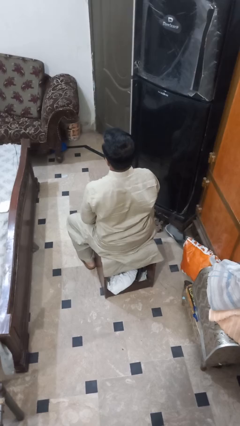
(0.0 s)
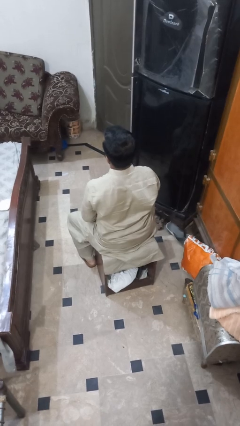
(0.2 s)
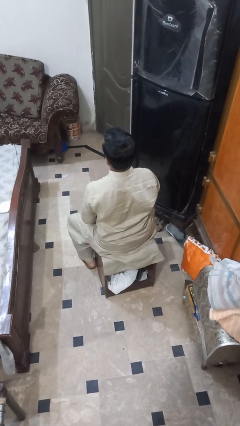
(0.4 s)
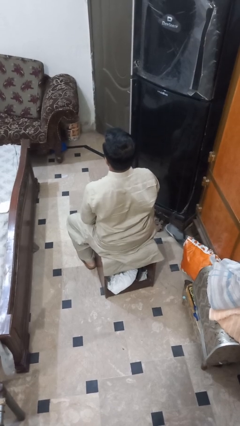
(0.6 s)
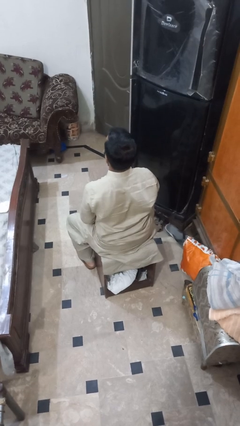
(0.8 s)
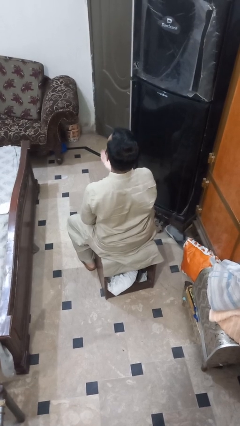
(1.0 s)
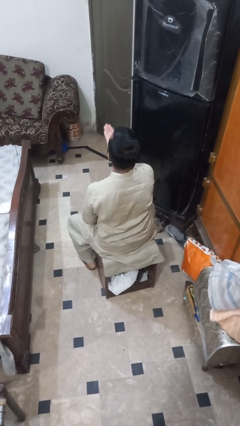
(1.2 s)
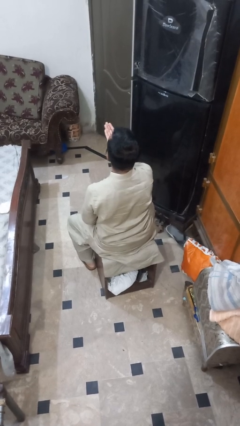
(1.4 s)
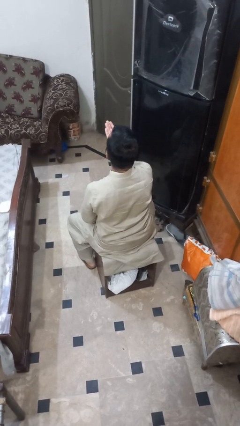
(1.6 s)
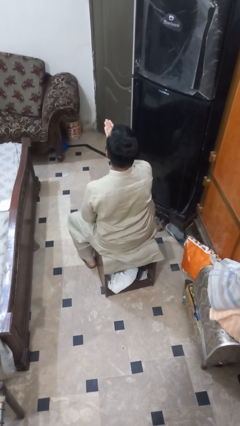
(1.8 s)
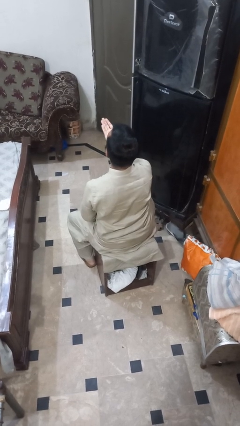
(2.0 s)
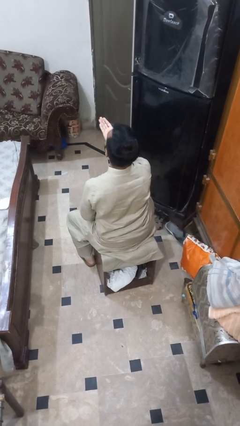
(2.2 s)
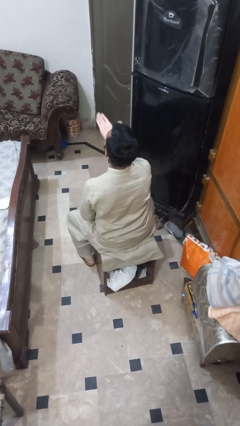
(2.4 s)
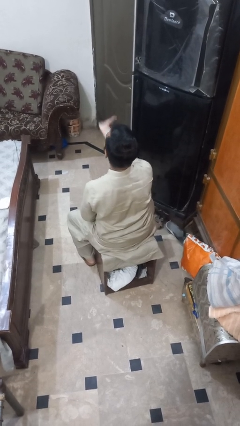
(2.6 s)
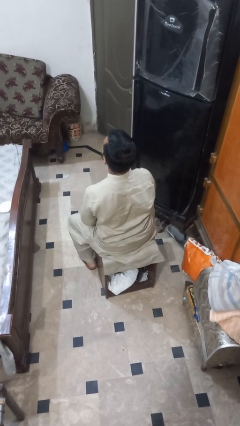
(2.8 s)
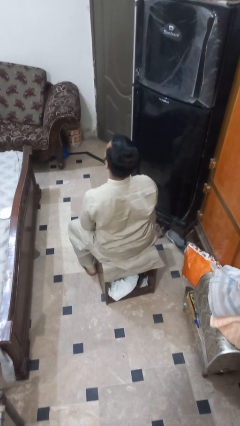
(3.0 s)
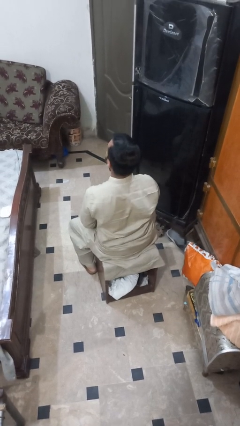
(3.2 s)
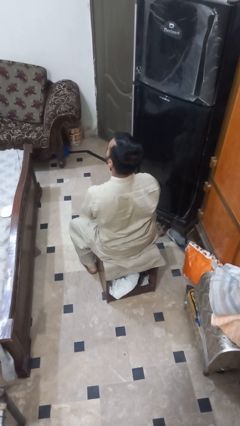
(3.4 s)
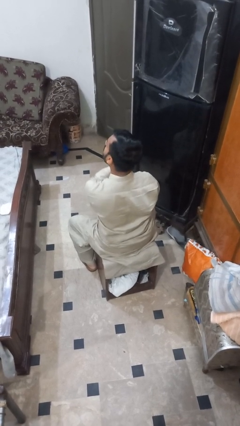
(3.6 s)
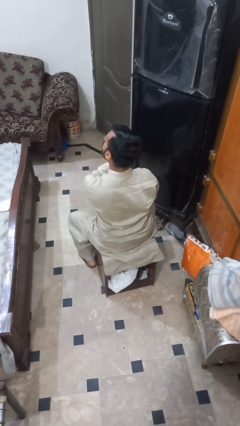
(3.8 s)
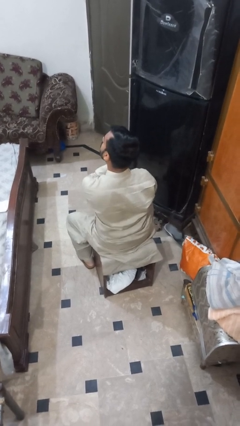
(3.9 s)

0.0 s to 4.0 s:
person gestures blow kiss

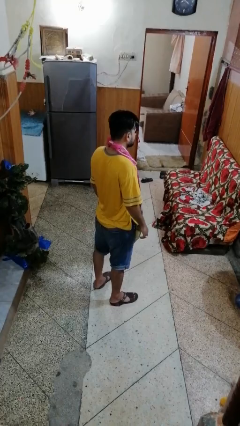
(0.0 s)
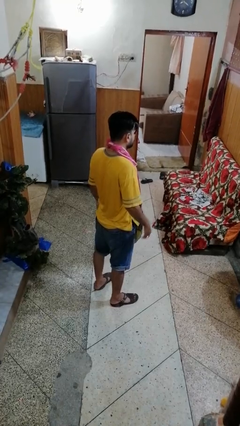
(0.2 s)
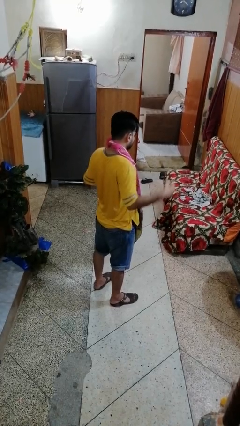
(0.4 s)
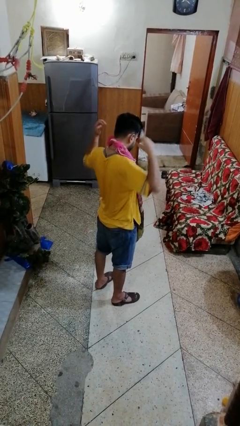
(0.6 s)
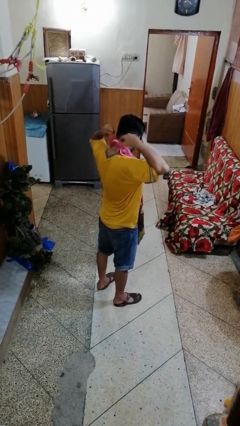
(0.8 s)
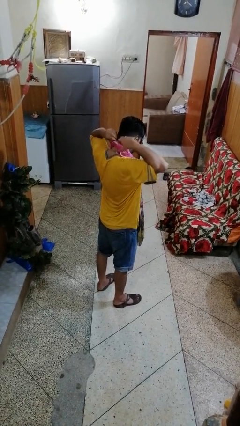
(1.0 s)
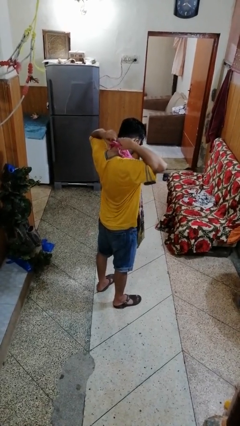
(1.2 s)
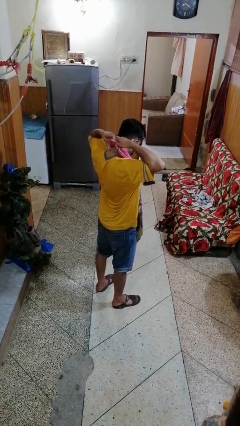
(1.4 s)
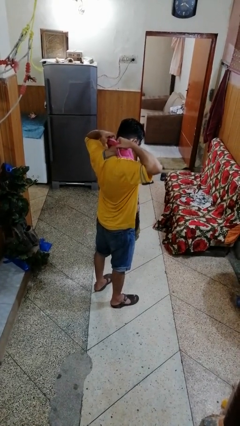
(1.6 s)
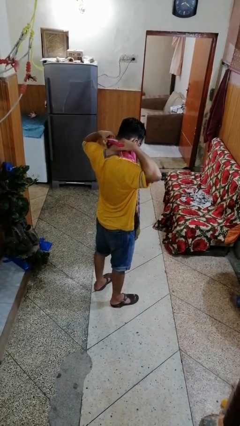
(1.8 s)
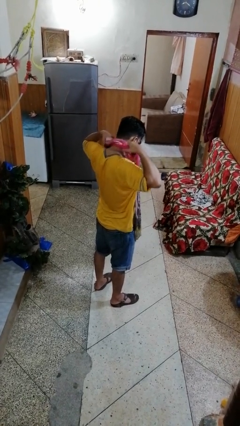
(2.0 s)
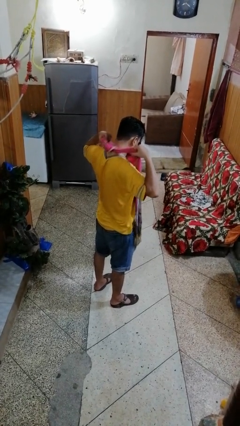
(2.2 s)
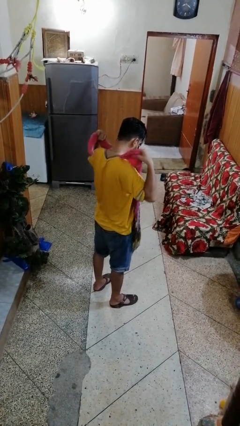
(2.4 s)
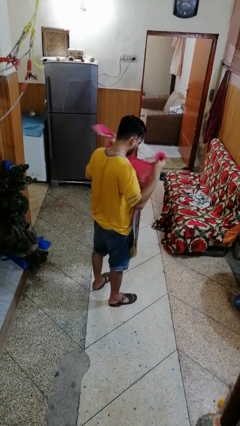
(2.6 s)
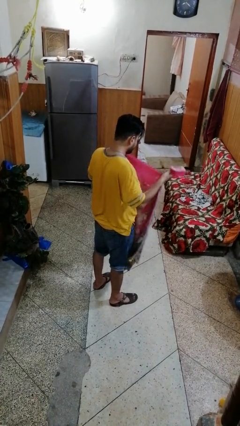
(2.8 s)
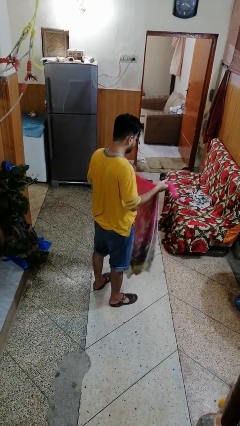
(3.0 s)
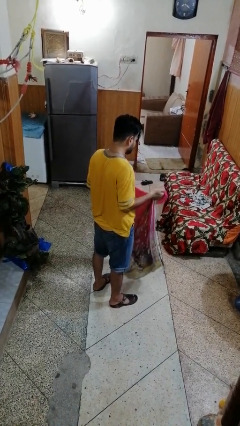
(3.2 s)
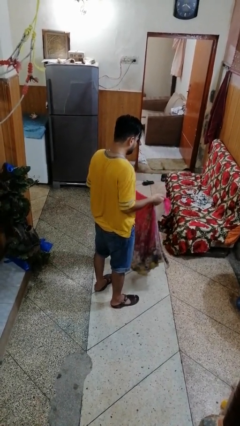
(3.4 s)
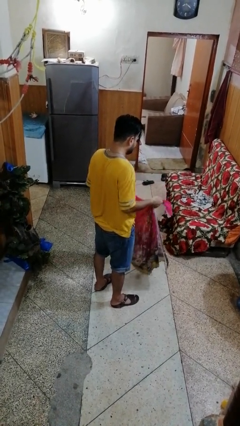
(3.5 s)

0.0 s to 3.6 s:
person takes off apron

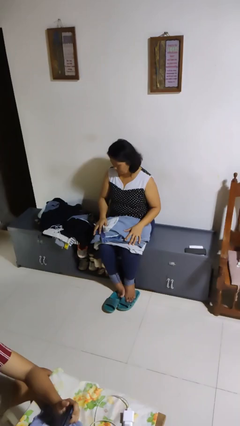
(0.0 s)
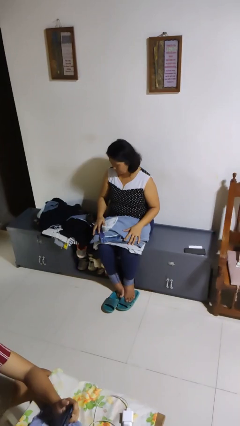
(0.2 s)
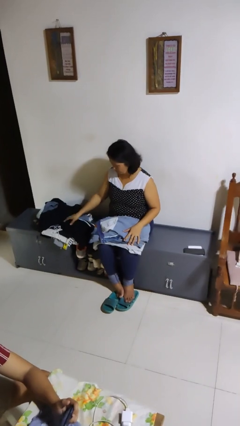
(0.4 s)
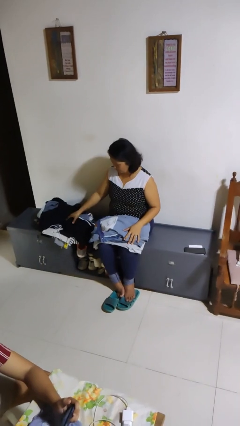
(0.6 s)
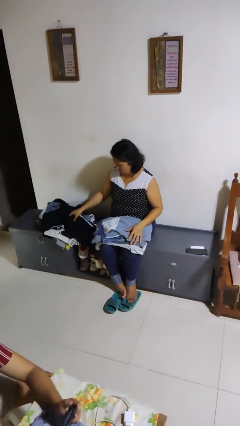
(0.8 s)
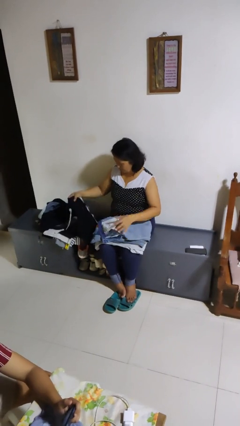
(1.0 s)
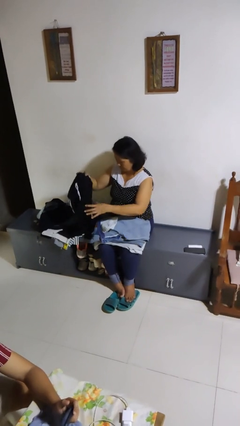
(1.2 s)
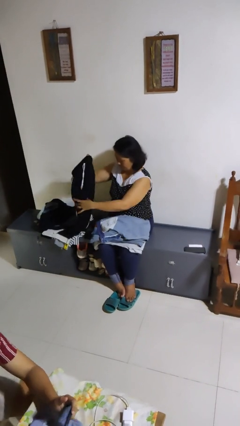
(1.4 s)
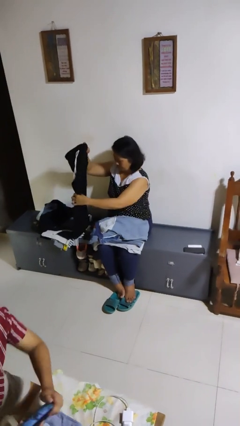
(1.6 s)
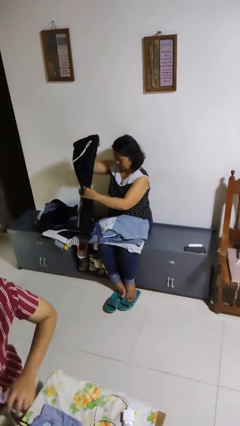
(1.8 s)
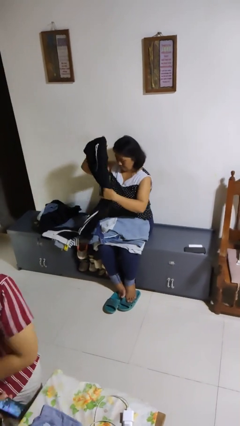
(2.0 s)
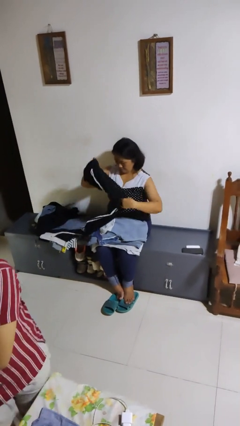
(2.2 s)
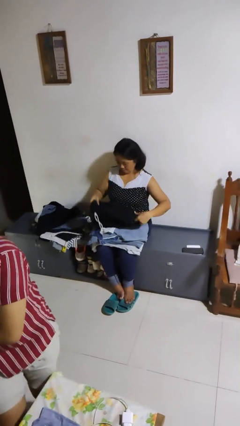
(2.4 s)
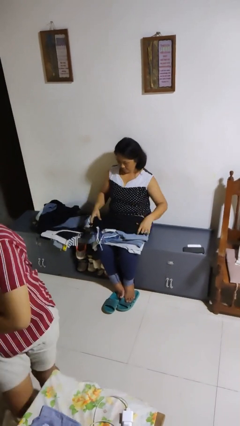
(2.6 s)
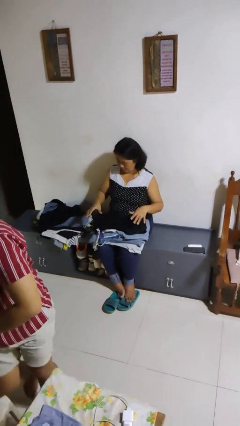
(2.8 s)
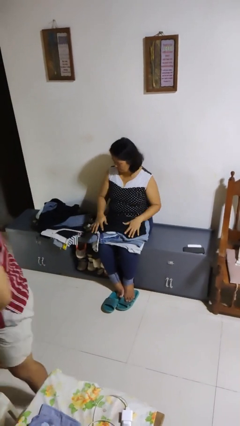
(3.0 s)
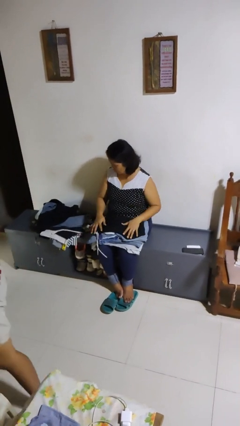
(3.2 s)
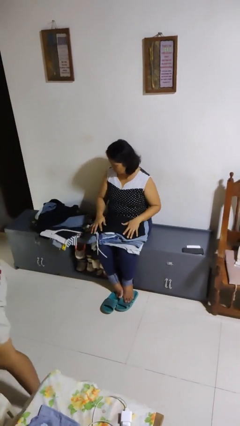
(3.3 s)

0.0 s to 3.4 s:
person folds pants

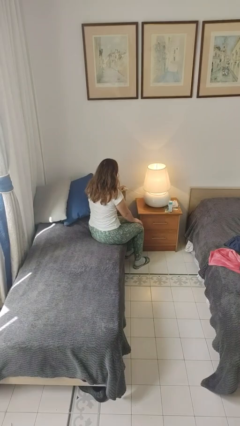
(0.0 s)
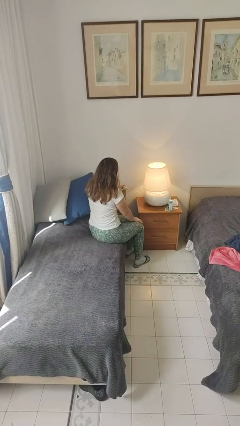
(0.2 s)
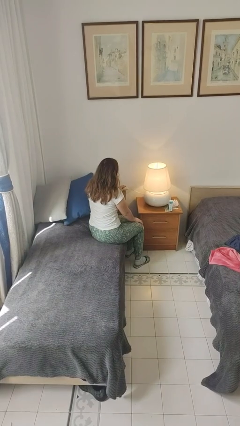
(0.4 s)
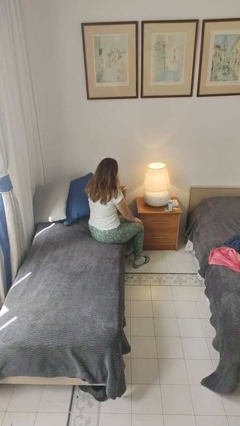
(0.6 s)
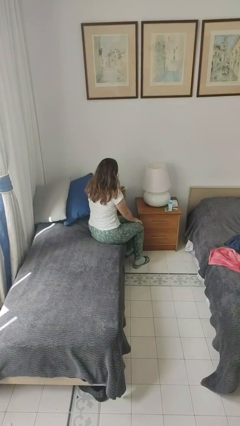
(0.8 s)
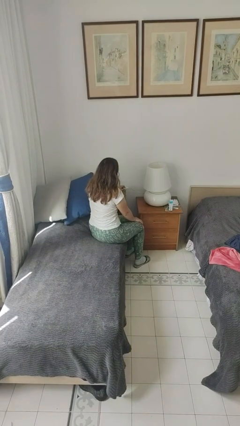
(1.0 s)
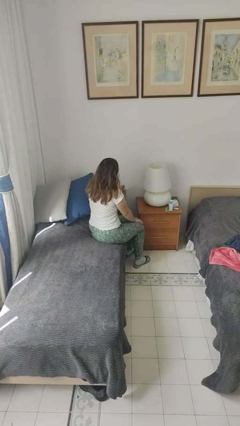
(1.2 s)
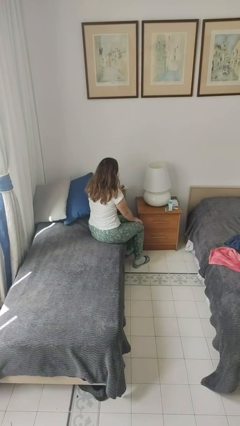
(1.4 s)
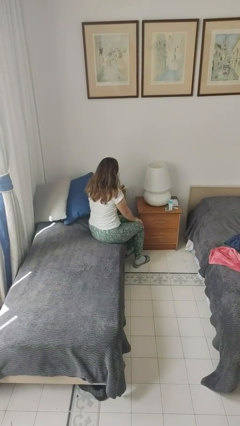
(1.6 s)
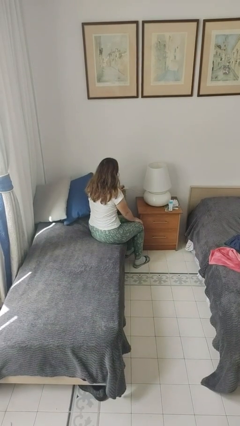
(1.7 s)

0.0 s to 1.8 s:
person turns off lamp

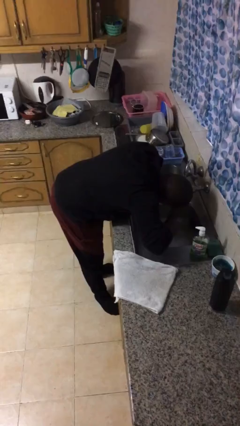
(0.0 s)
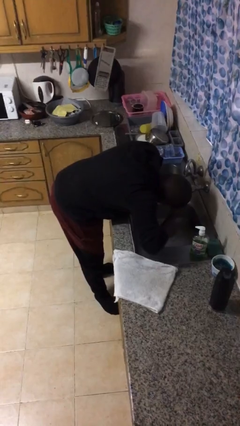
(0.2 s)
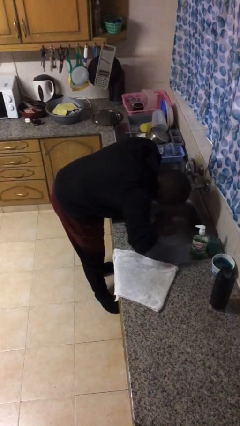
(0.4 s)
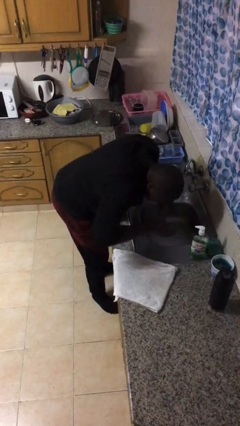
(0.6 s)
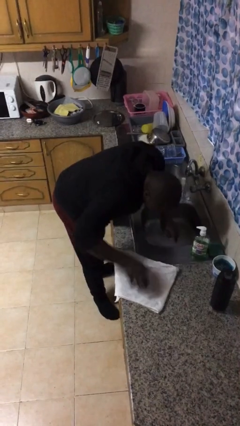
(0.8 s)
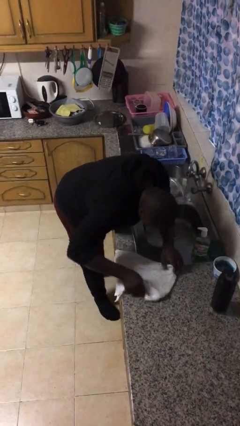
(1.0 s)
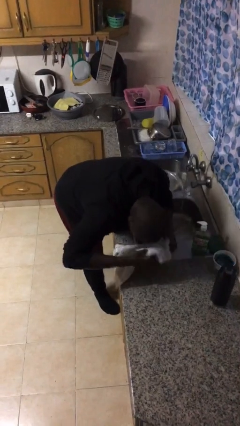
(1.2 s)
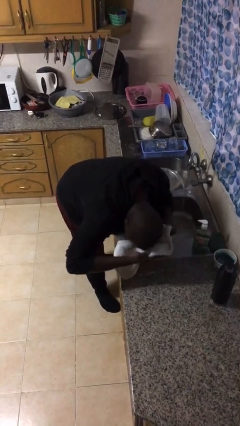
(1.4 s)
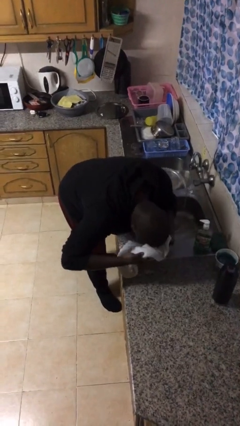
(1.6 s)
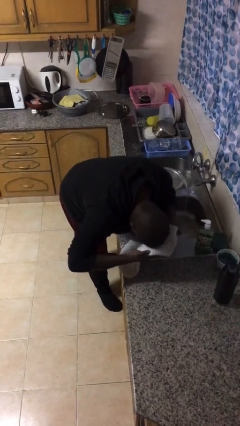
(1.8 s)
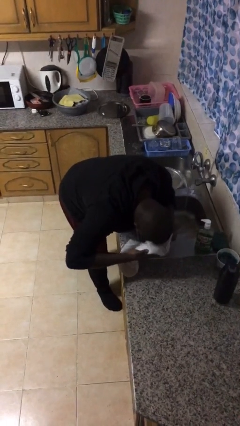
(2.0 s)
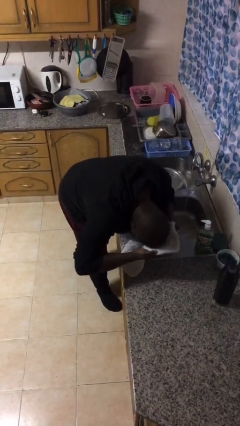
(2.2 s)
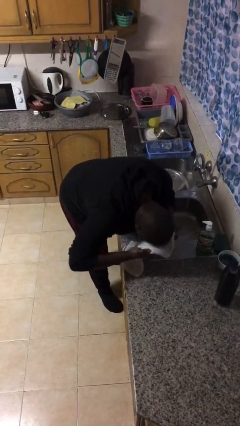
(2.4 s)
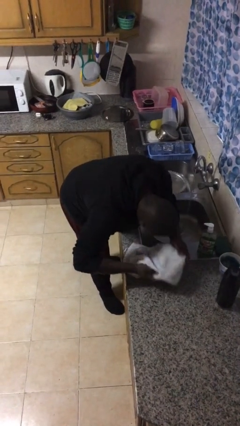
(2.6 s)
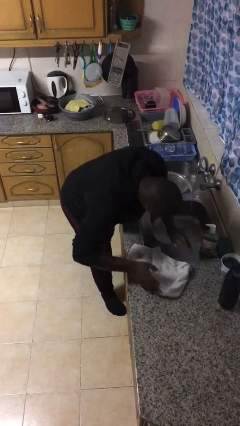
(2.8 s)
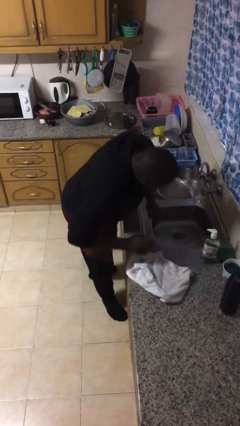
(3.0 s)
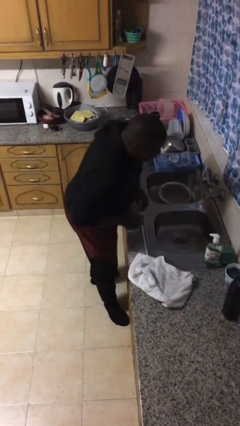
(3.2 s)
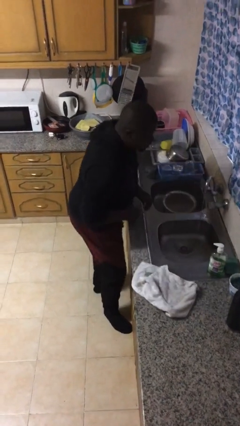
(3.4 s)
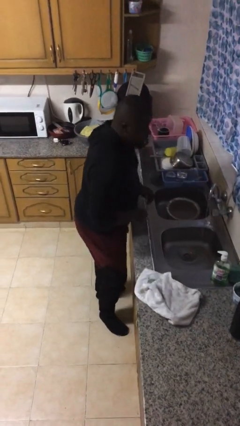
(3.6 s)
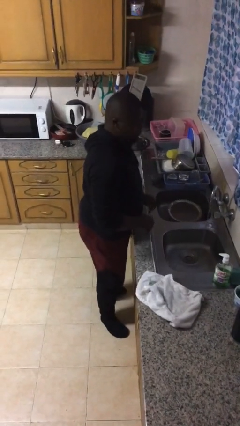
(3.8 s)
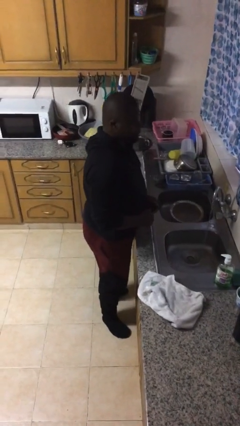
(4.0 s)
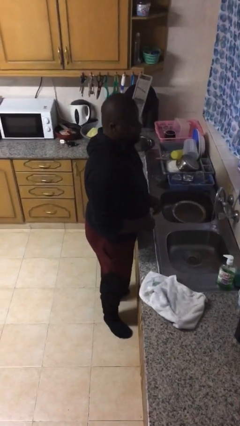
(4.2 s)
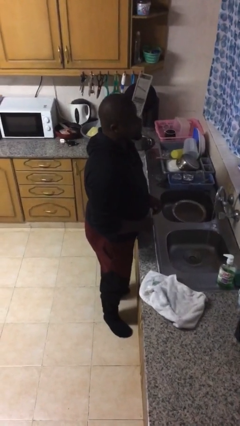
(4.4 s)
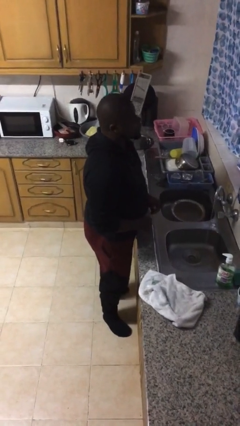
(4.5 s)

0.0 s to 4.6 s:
person dries face with towel

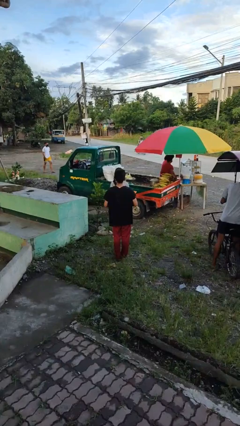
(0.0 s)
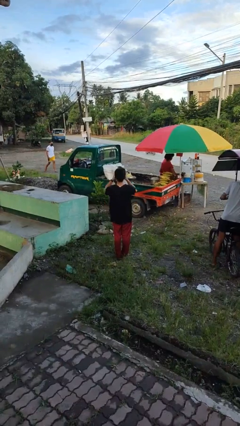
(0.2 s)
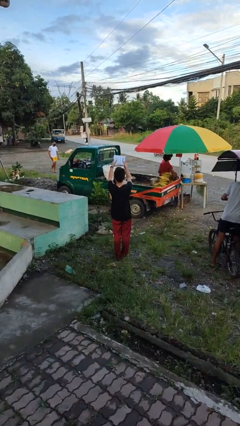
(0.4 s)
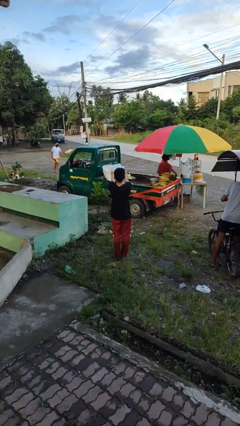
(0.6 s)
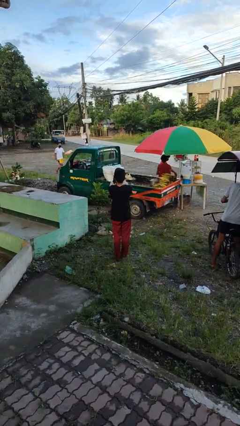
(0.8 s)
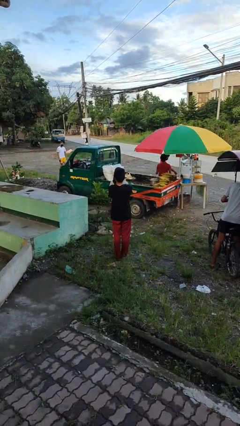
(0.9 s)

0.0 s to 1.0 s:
person transfers object to person
